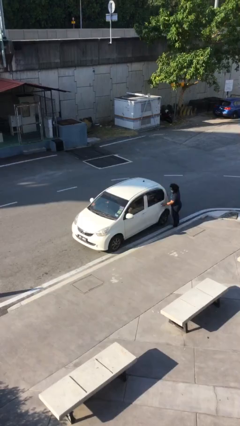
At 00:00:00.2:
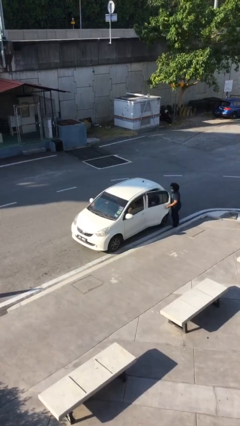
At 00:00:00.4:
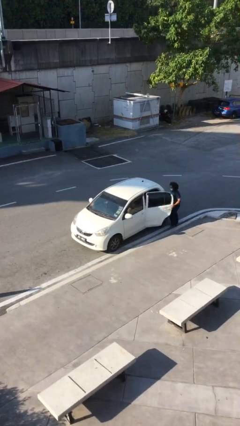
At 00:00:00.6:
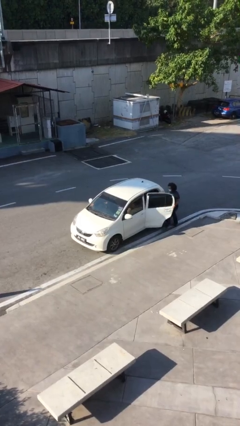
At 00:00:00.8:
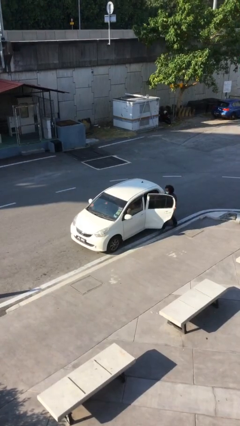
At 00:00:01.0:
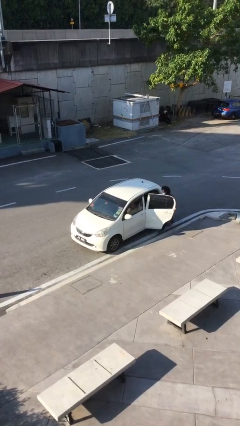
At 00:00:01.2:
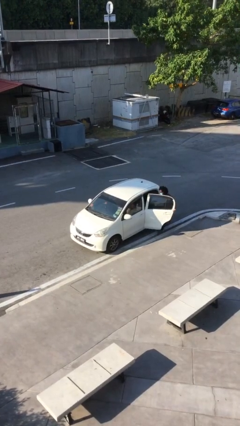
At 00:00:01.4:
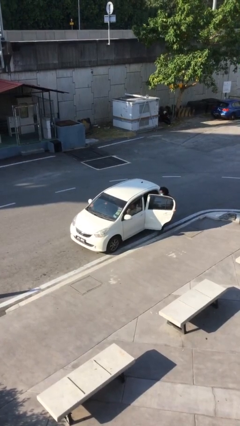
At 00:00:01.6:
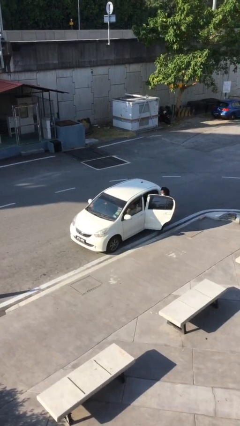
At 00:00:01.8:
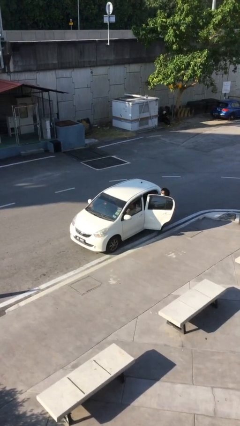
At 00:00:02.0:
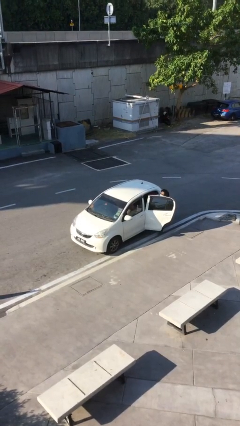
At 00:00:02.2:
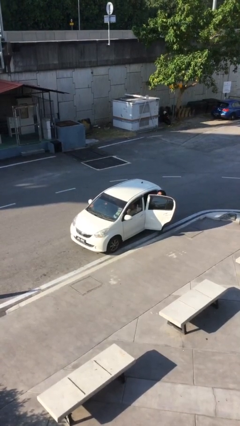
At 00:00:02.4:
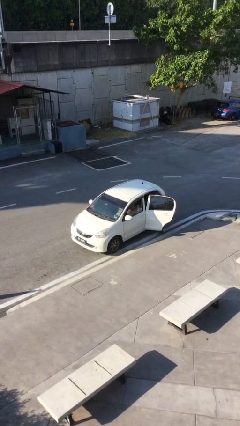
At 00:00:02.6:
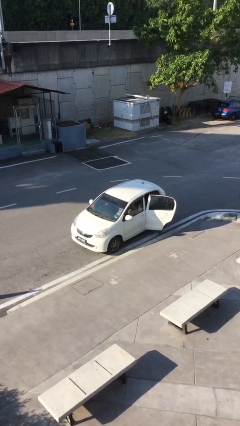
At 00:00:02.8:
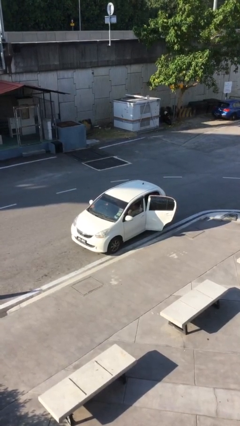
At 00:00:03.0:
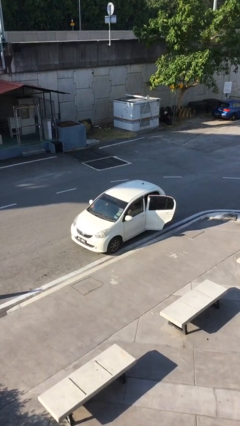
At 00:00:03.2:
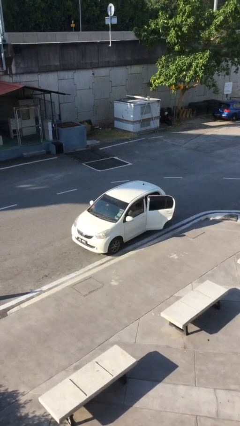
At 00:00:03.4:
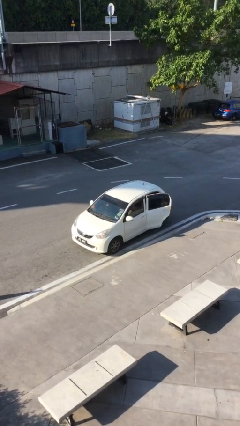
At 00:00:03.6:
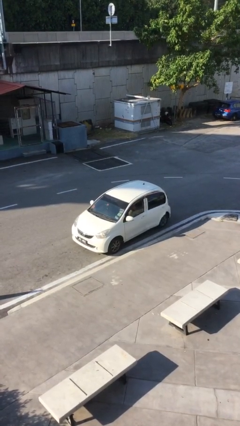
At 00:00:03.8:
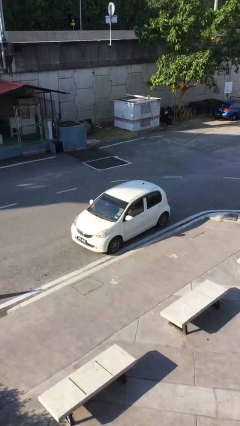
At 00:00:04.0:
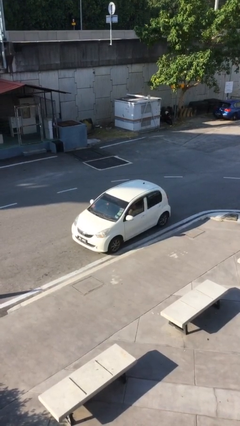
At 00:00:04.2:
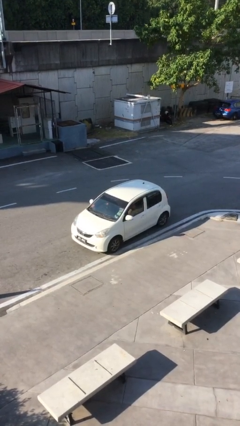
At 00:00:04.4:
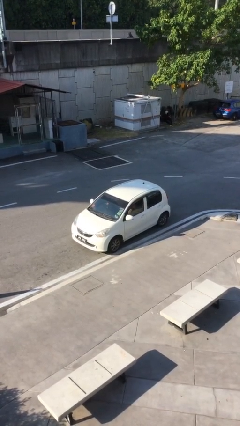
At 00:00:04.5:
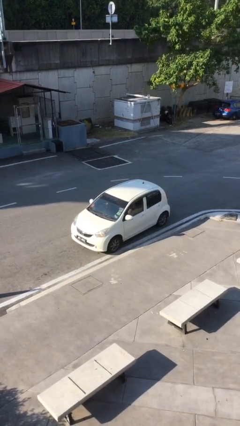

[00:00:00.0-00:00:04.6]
car picks up person

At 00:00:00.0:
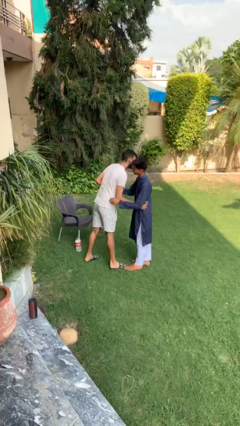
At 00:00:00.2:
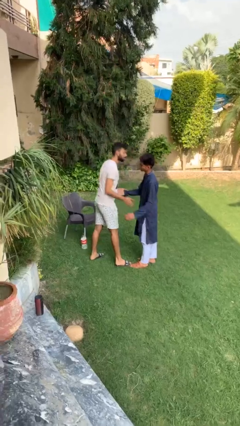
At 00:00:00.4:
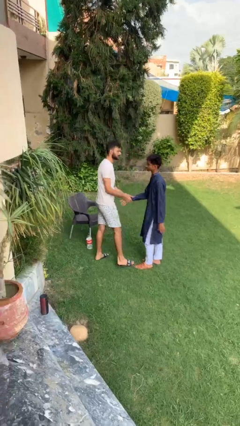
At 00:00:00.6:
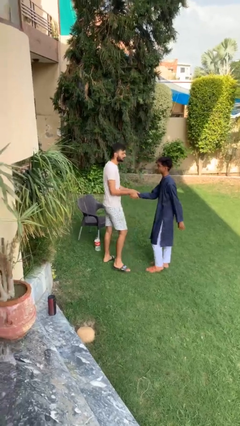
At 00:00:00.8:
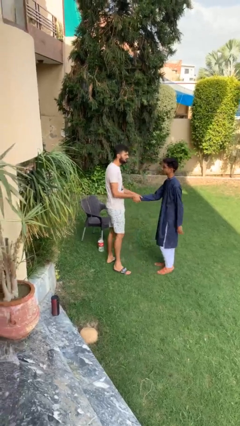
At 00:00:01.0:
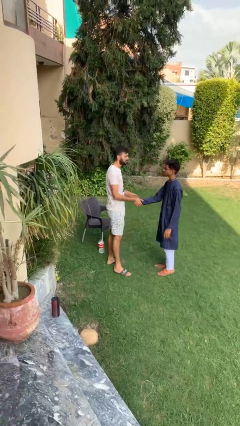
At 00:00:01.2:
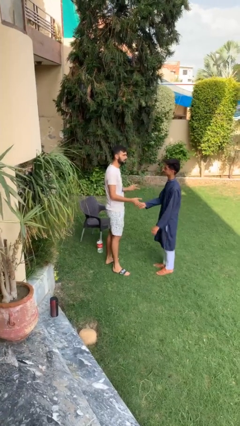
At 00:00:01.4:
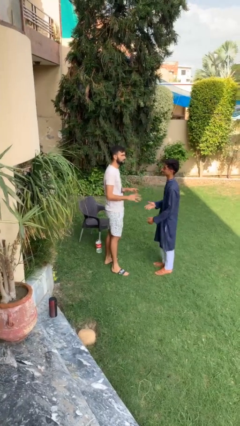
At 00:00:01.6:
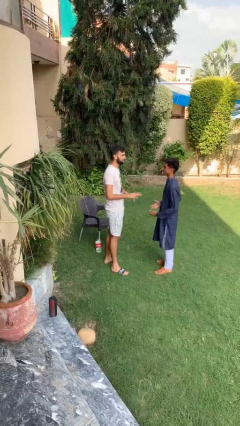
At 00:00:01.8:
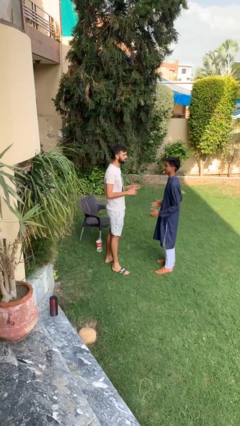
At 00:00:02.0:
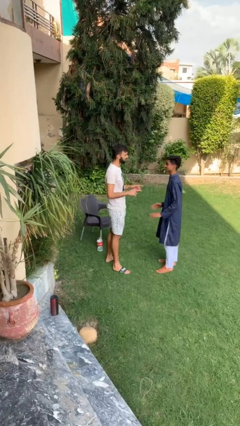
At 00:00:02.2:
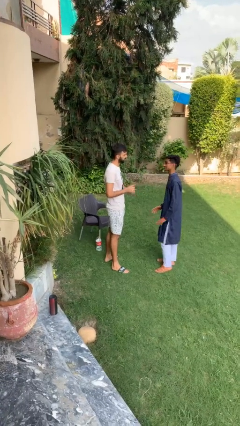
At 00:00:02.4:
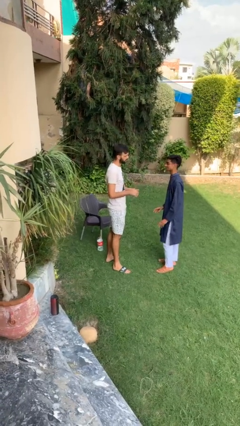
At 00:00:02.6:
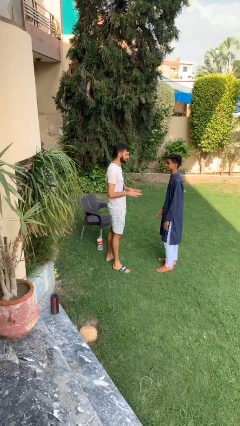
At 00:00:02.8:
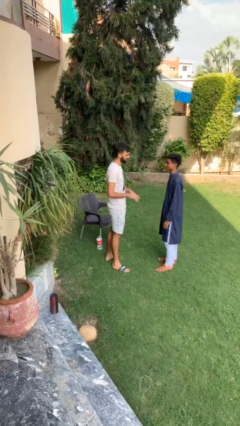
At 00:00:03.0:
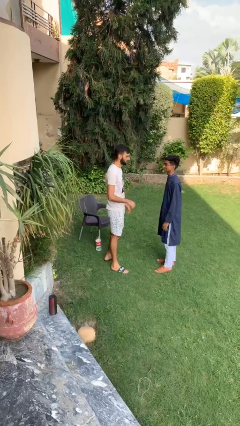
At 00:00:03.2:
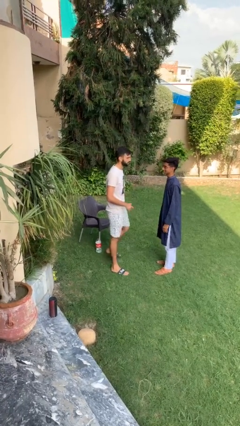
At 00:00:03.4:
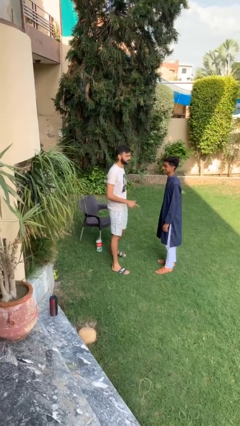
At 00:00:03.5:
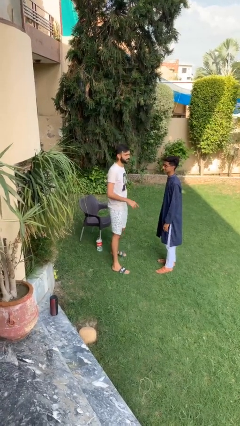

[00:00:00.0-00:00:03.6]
person talks to person

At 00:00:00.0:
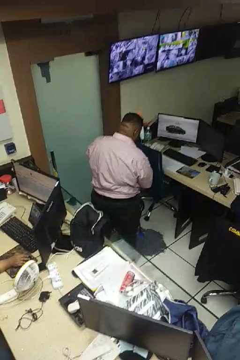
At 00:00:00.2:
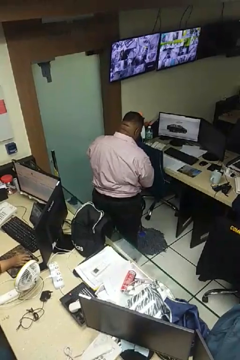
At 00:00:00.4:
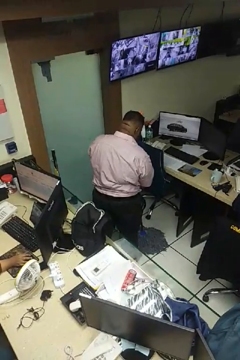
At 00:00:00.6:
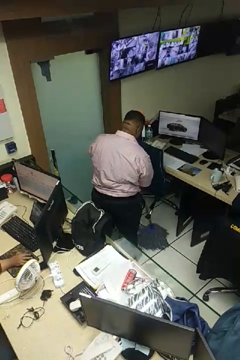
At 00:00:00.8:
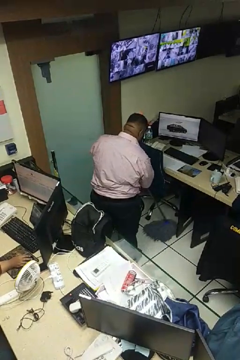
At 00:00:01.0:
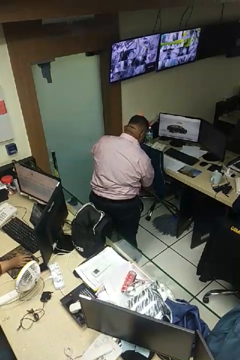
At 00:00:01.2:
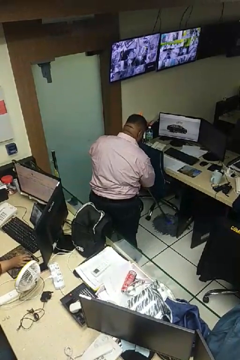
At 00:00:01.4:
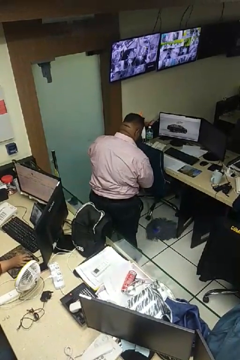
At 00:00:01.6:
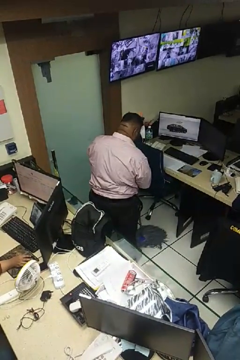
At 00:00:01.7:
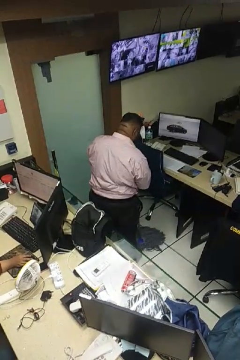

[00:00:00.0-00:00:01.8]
person mops

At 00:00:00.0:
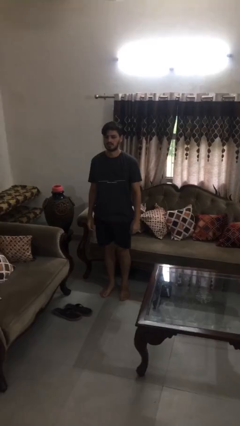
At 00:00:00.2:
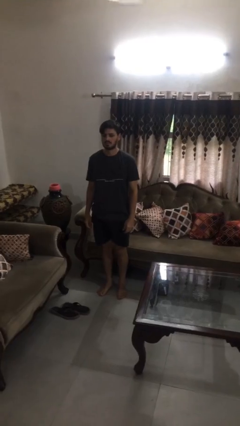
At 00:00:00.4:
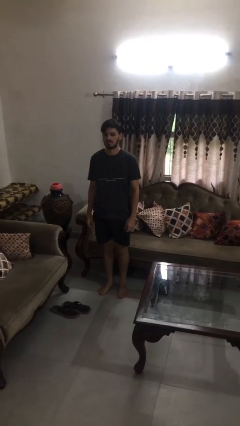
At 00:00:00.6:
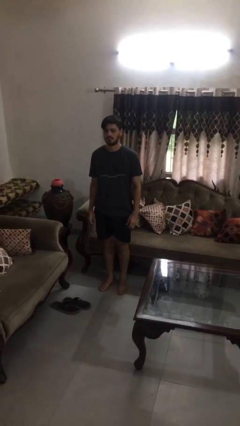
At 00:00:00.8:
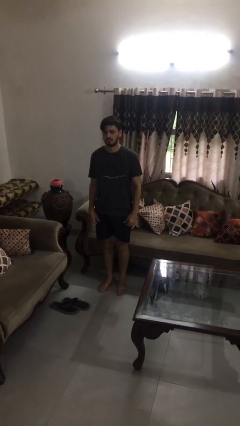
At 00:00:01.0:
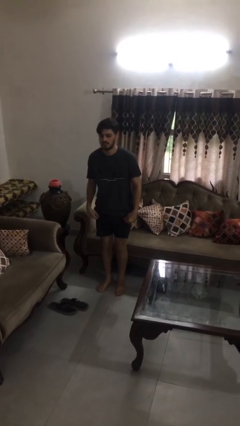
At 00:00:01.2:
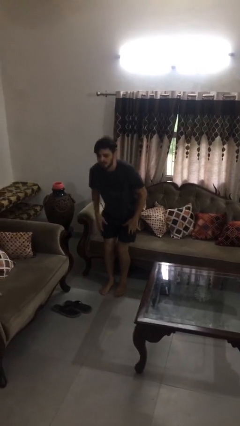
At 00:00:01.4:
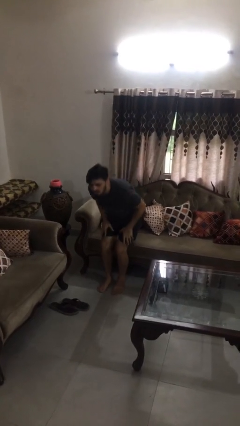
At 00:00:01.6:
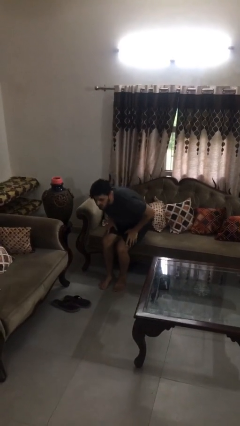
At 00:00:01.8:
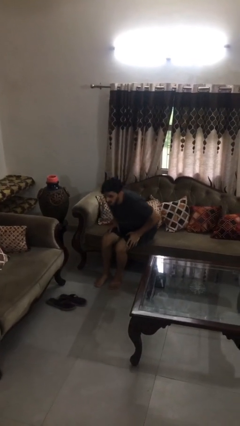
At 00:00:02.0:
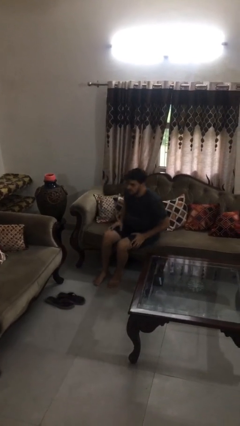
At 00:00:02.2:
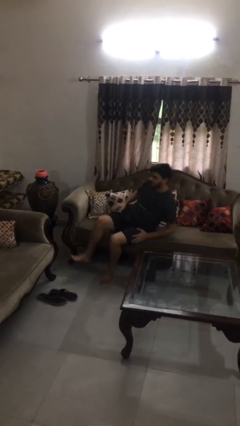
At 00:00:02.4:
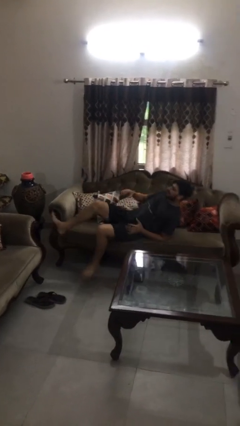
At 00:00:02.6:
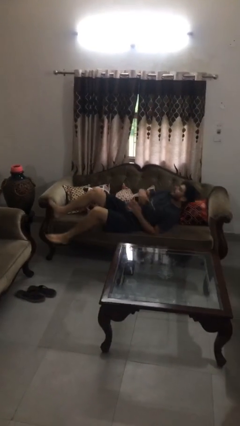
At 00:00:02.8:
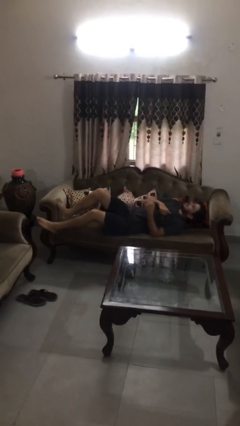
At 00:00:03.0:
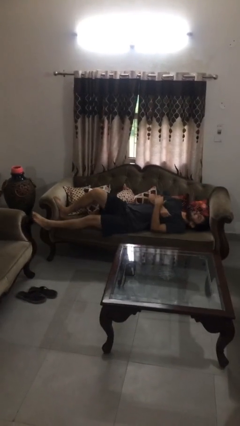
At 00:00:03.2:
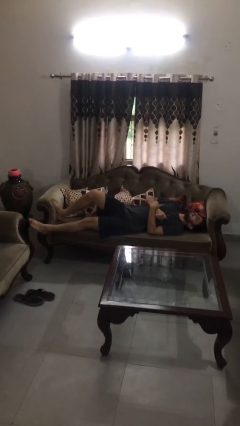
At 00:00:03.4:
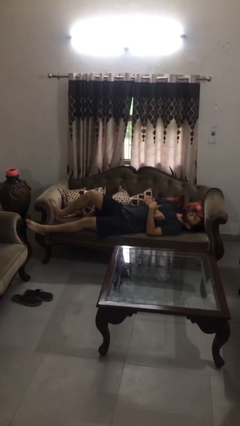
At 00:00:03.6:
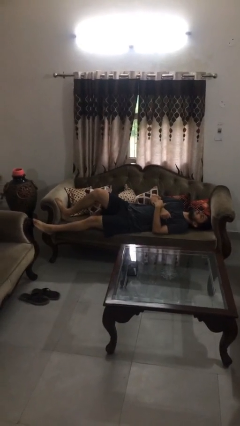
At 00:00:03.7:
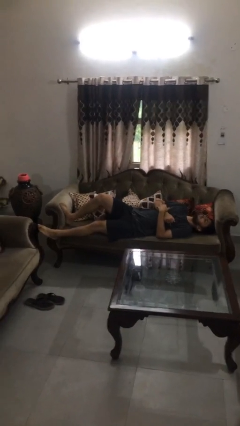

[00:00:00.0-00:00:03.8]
person lies down on couch

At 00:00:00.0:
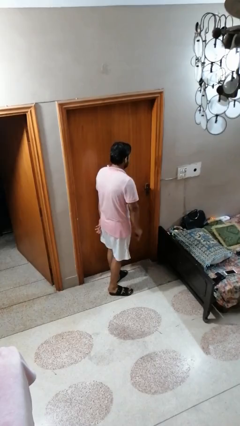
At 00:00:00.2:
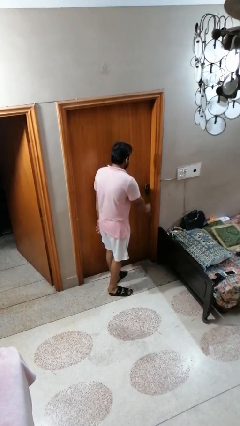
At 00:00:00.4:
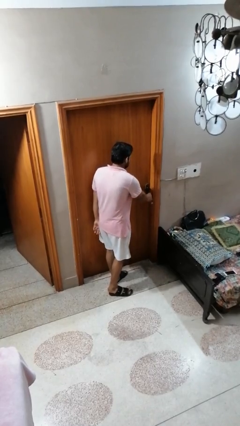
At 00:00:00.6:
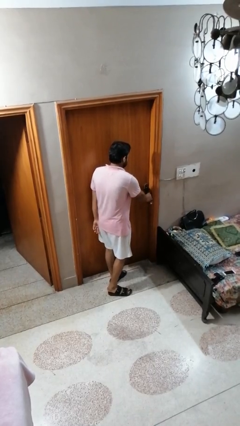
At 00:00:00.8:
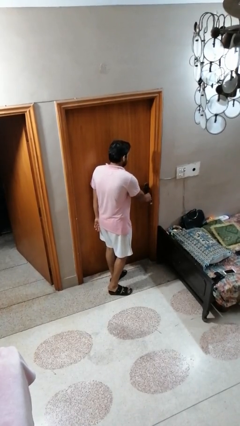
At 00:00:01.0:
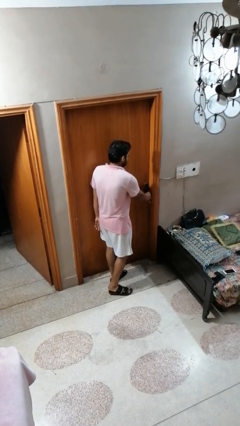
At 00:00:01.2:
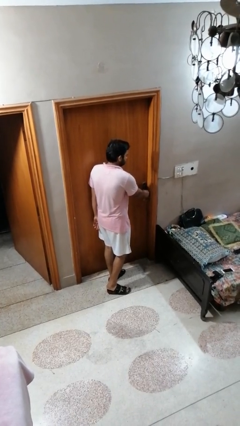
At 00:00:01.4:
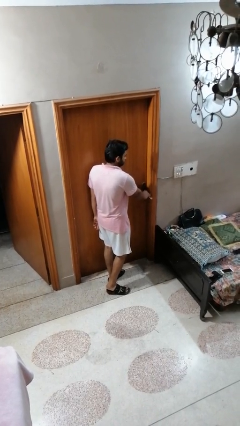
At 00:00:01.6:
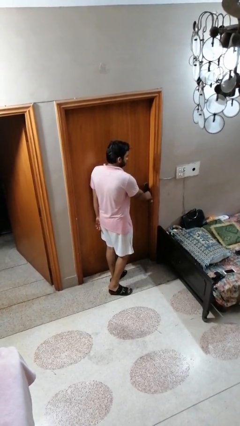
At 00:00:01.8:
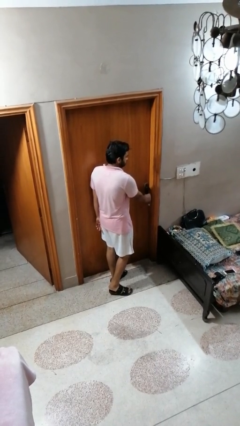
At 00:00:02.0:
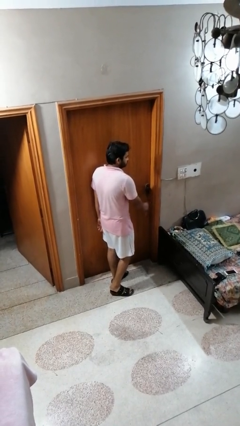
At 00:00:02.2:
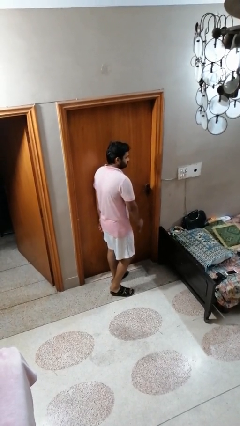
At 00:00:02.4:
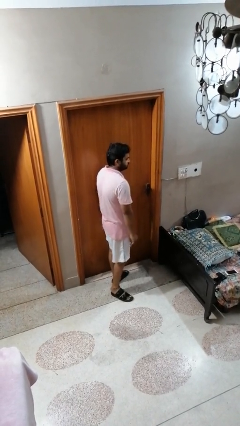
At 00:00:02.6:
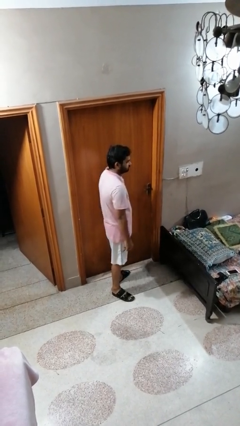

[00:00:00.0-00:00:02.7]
person locks door with keys

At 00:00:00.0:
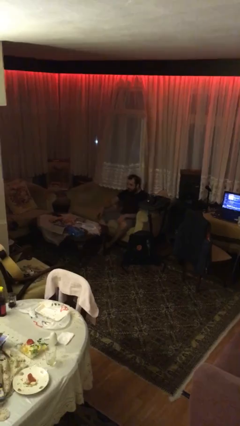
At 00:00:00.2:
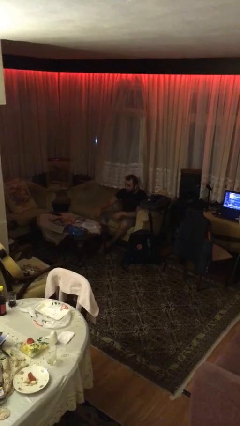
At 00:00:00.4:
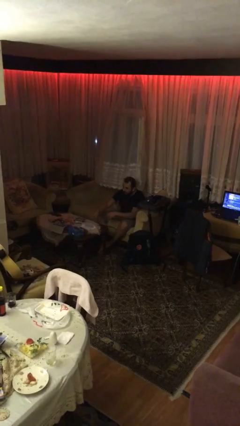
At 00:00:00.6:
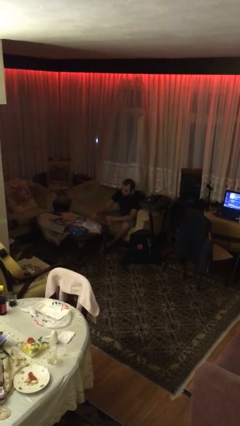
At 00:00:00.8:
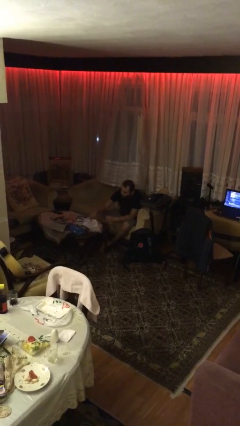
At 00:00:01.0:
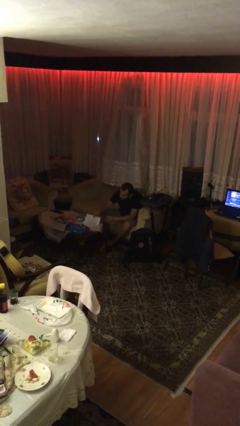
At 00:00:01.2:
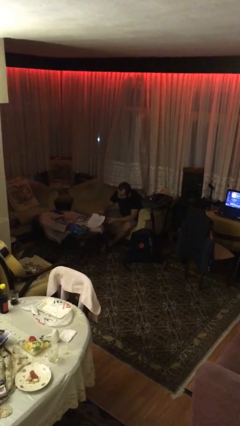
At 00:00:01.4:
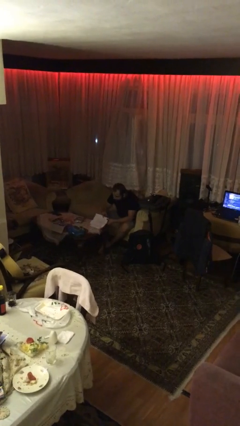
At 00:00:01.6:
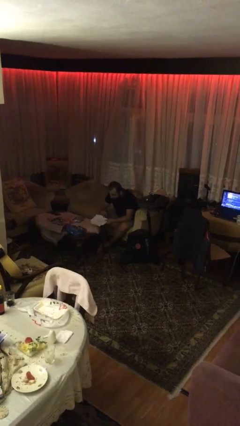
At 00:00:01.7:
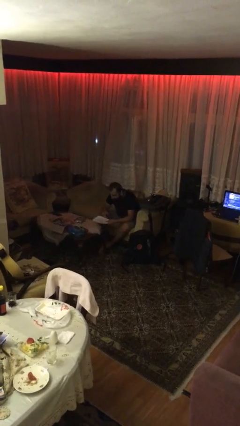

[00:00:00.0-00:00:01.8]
person picks up object from table
